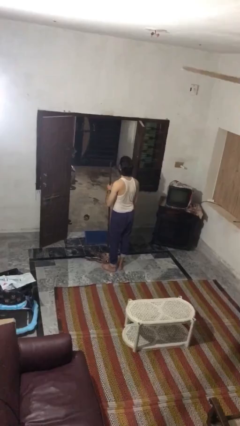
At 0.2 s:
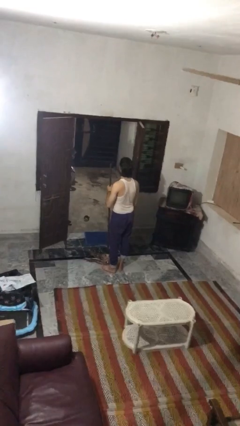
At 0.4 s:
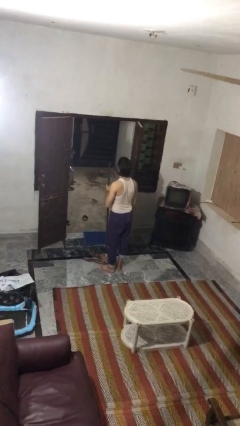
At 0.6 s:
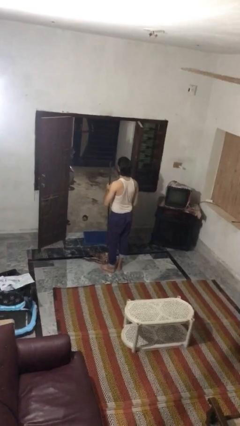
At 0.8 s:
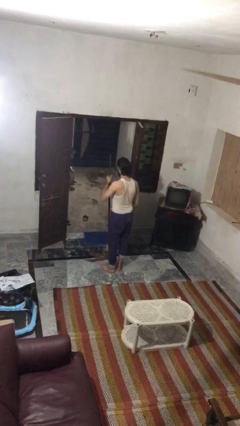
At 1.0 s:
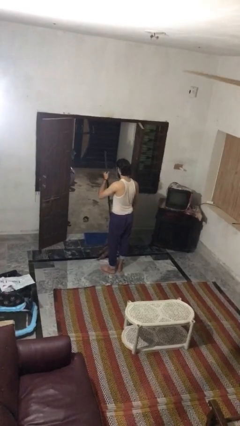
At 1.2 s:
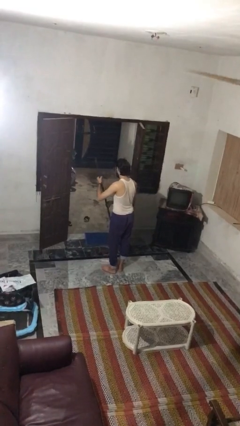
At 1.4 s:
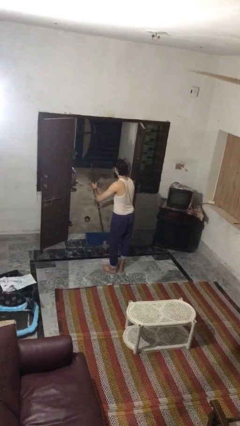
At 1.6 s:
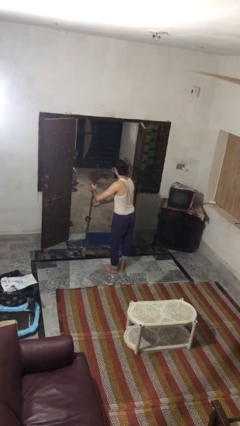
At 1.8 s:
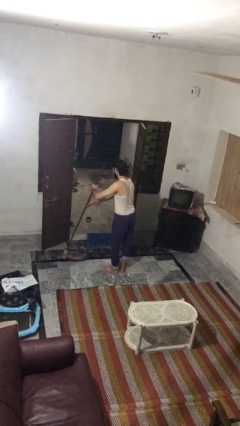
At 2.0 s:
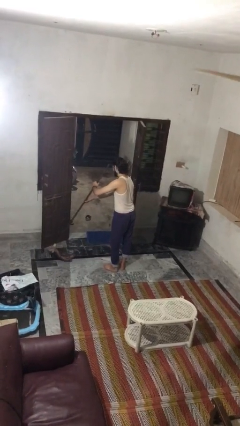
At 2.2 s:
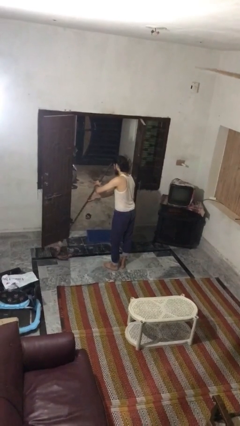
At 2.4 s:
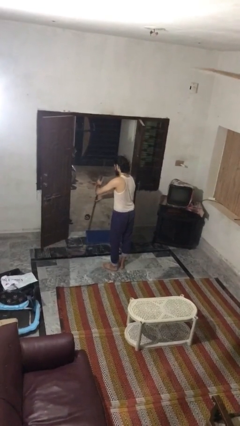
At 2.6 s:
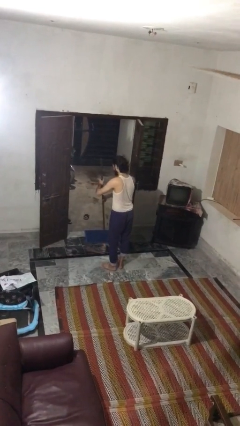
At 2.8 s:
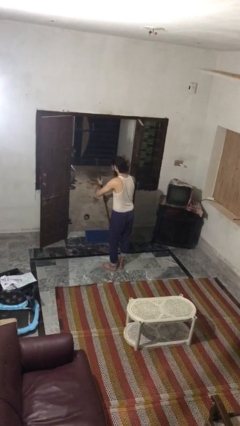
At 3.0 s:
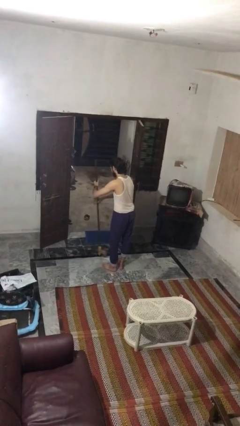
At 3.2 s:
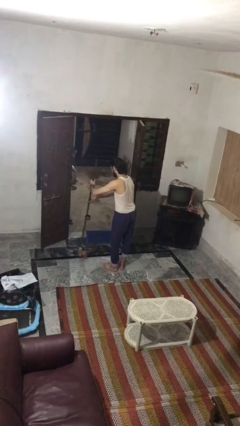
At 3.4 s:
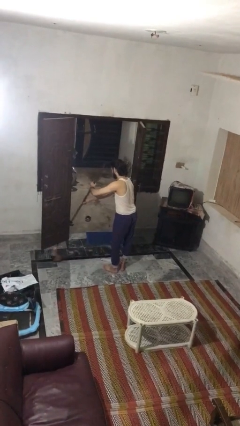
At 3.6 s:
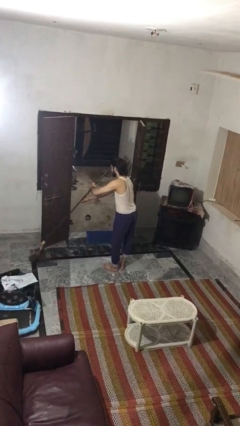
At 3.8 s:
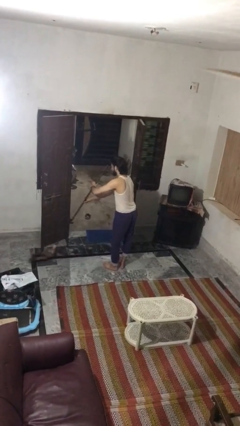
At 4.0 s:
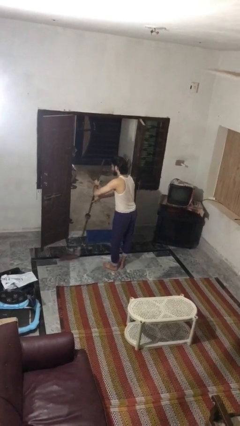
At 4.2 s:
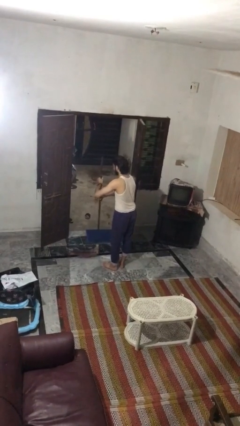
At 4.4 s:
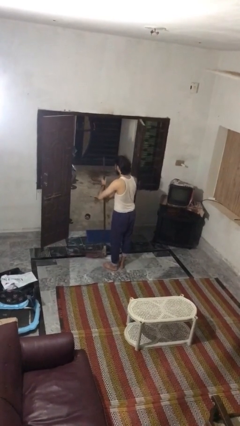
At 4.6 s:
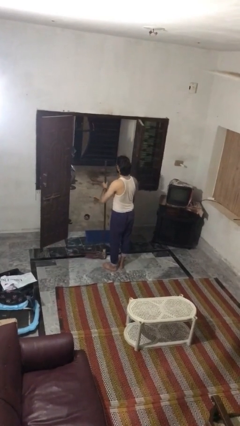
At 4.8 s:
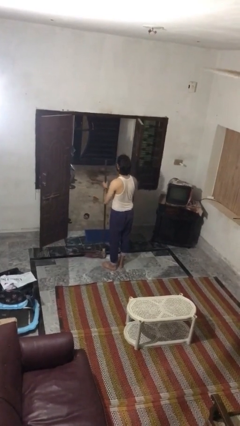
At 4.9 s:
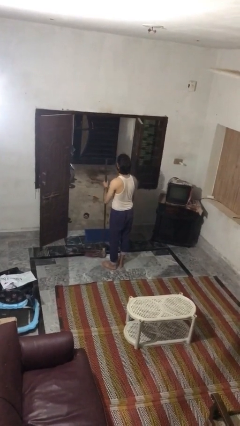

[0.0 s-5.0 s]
person mops

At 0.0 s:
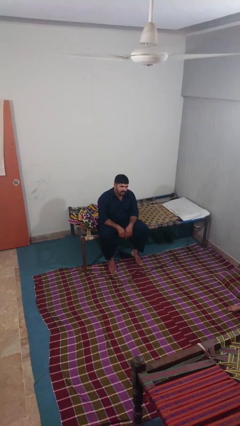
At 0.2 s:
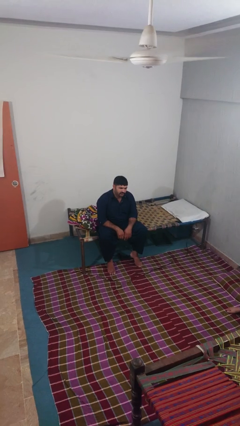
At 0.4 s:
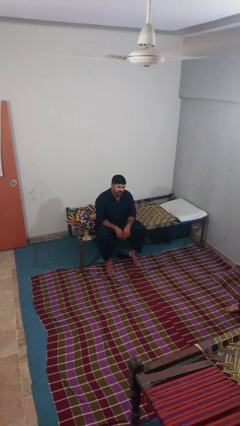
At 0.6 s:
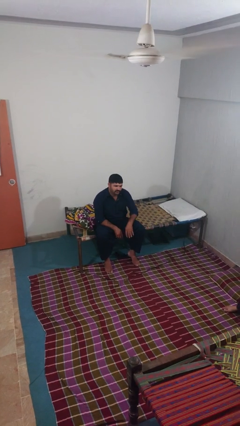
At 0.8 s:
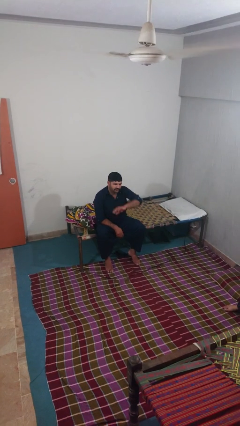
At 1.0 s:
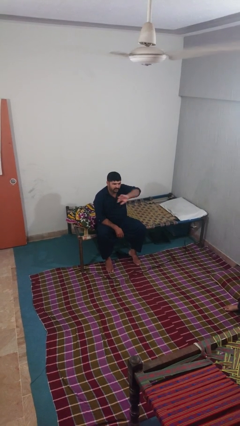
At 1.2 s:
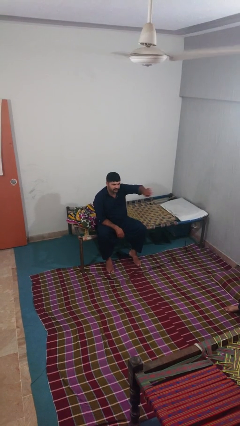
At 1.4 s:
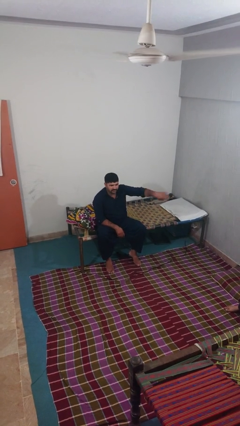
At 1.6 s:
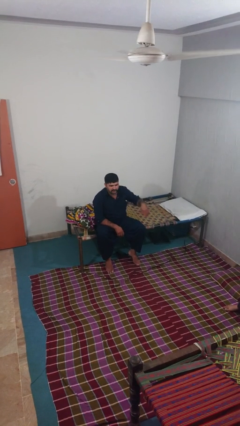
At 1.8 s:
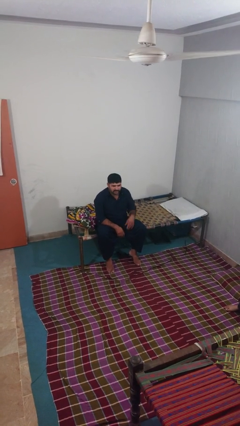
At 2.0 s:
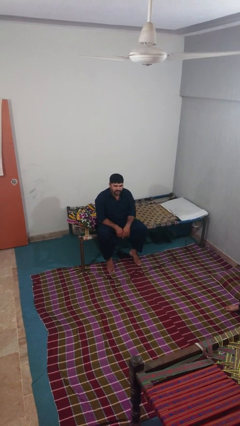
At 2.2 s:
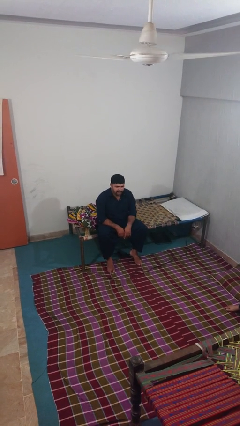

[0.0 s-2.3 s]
person gestures swipe left

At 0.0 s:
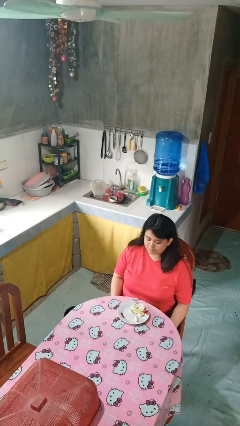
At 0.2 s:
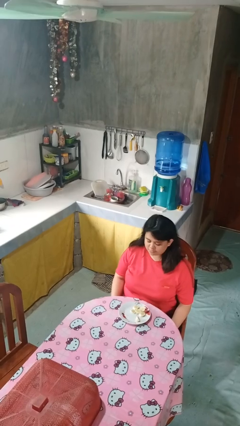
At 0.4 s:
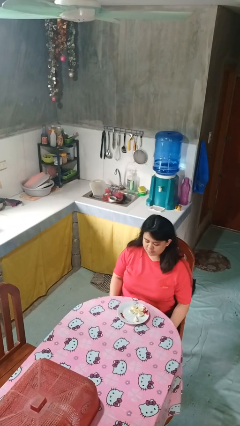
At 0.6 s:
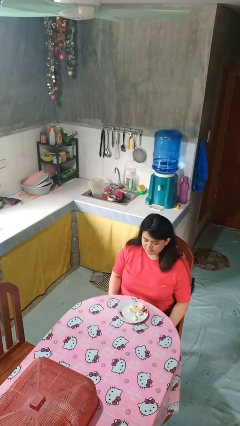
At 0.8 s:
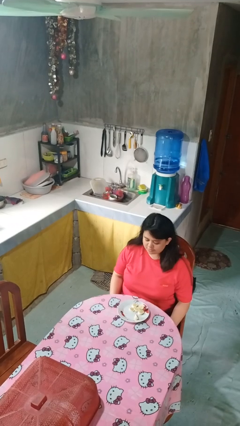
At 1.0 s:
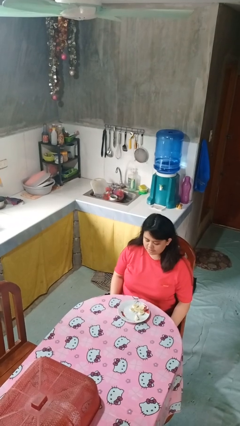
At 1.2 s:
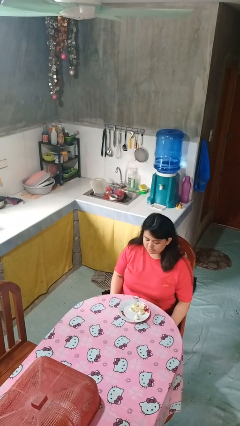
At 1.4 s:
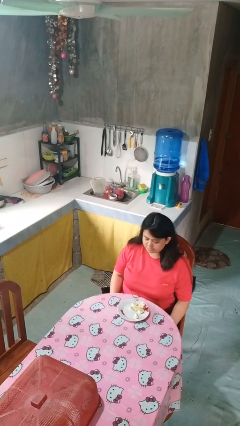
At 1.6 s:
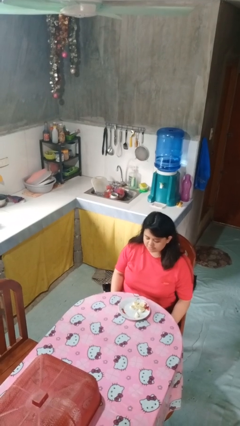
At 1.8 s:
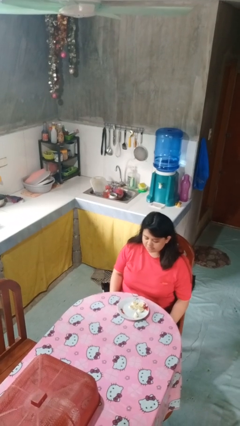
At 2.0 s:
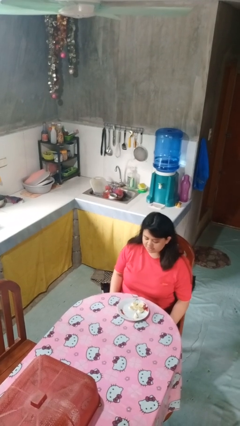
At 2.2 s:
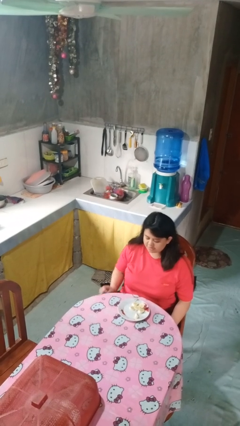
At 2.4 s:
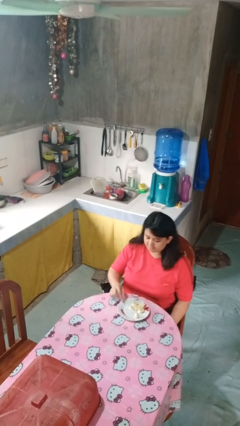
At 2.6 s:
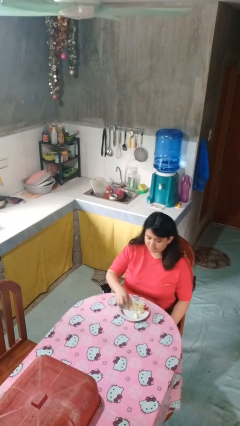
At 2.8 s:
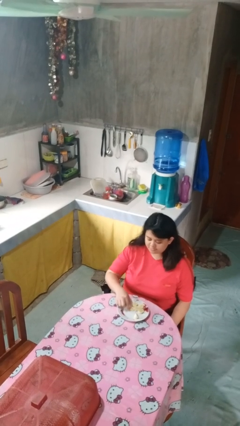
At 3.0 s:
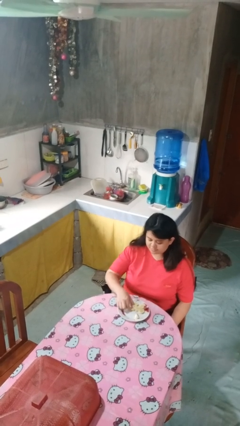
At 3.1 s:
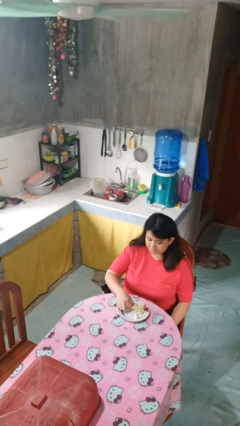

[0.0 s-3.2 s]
person eats with hands

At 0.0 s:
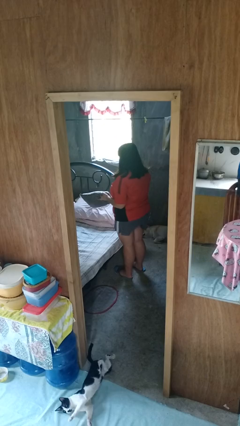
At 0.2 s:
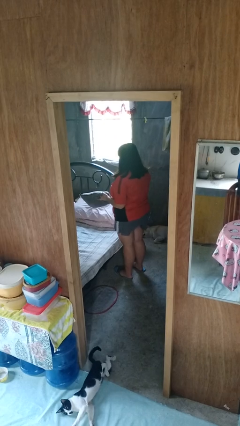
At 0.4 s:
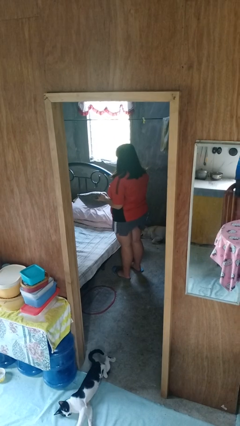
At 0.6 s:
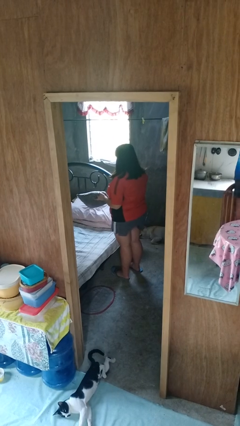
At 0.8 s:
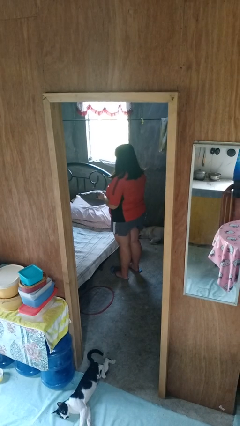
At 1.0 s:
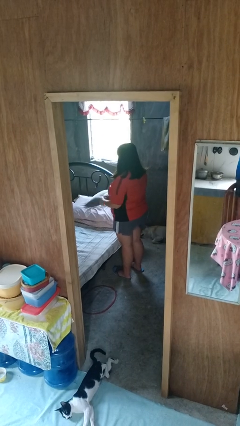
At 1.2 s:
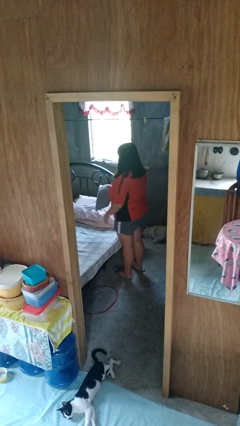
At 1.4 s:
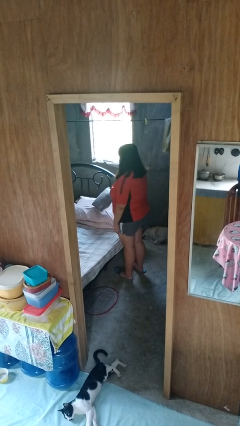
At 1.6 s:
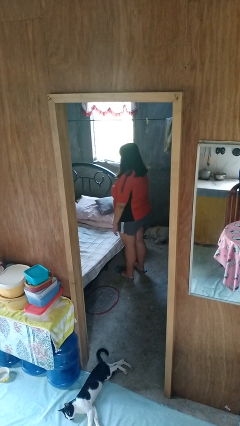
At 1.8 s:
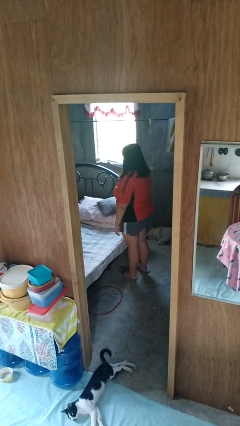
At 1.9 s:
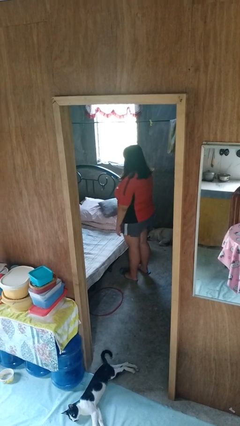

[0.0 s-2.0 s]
person puts down object on bed

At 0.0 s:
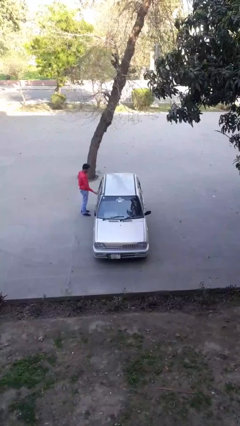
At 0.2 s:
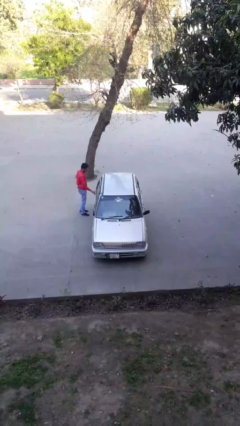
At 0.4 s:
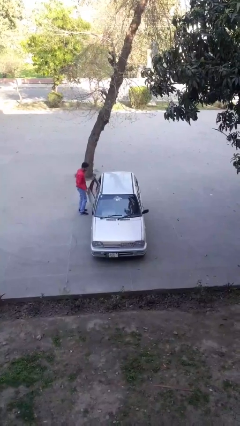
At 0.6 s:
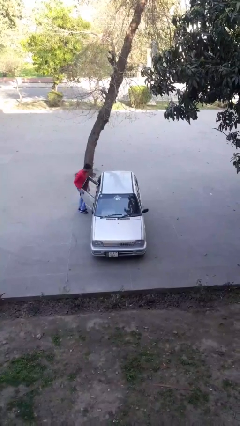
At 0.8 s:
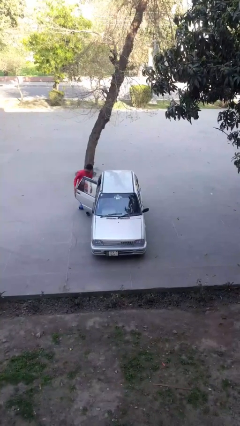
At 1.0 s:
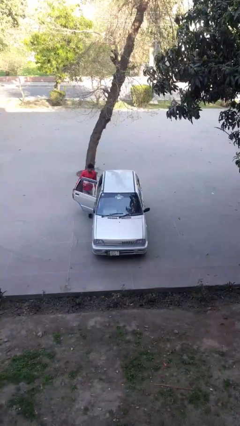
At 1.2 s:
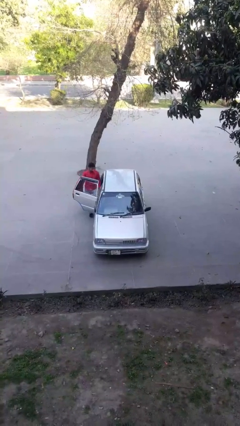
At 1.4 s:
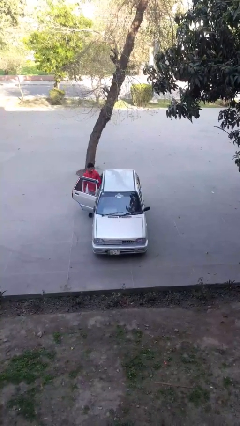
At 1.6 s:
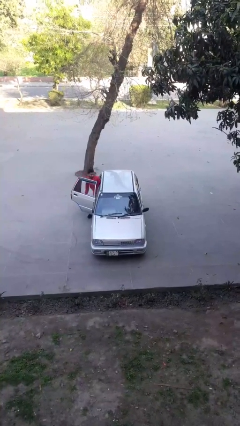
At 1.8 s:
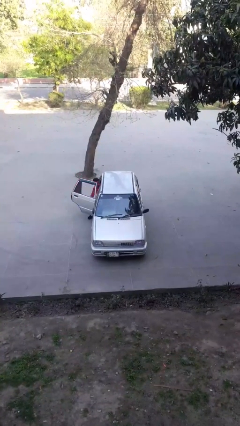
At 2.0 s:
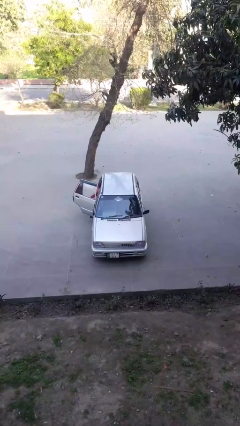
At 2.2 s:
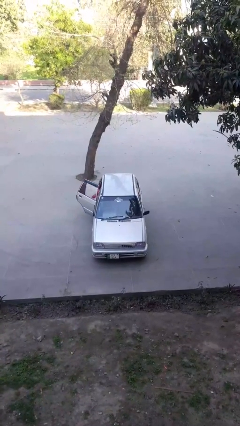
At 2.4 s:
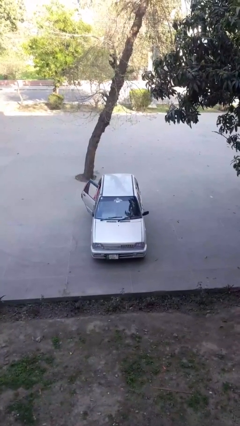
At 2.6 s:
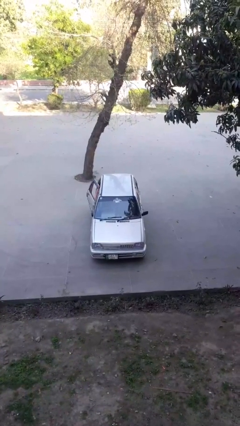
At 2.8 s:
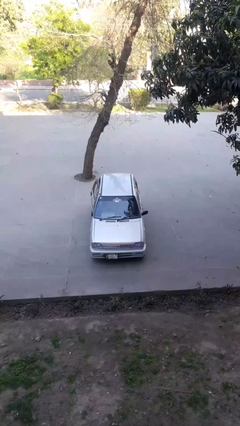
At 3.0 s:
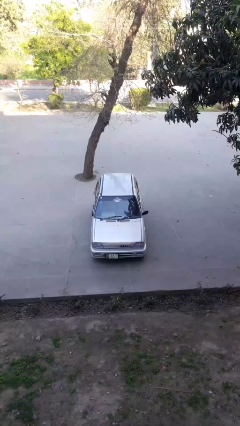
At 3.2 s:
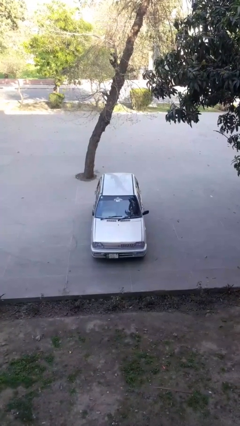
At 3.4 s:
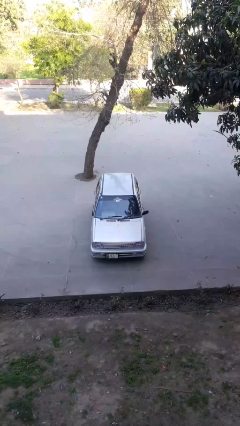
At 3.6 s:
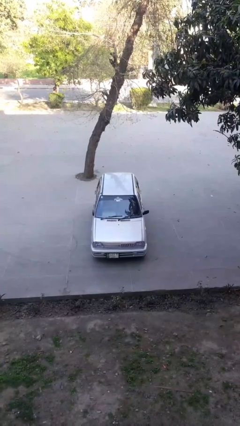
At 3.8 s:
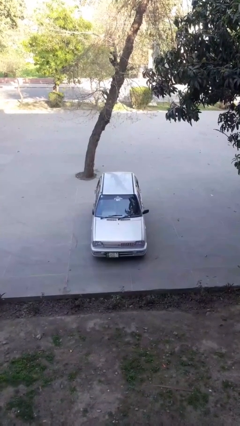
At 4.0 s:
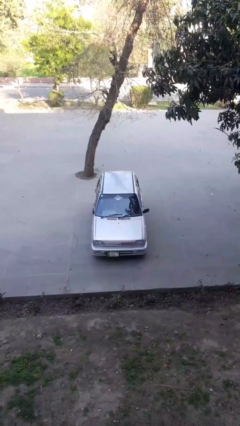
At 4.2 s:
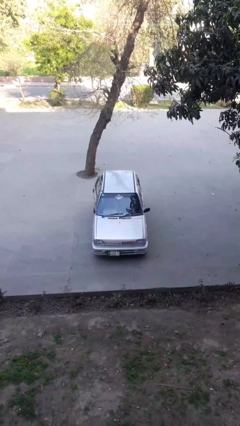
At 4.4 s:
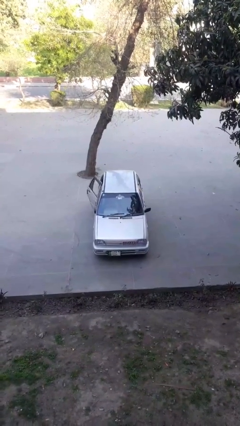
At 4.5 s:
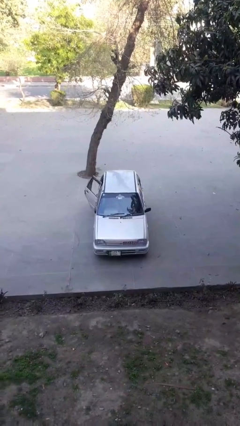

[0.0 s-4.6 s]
car picks up person

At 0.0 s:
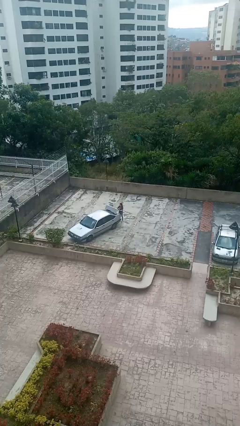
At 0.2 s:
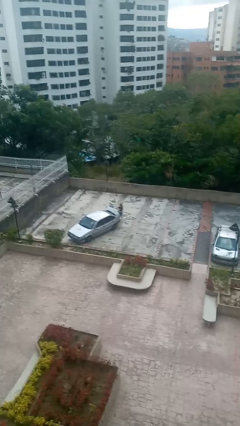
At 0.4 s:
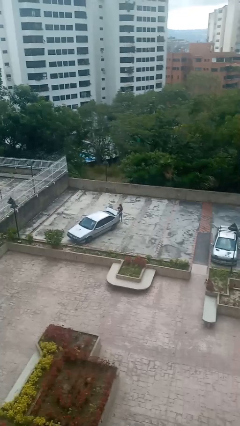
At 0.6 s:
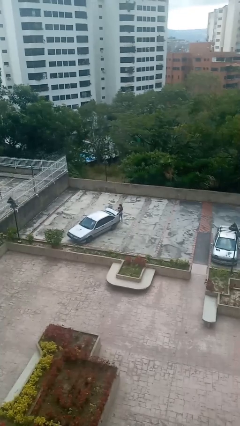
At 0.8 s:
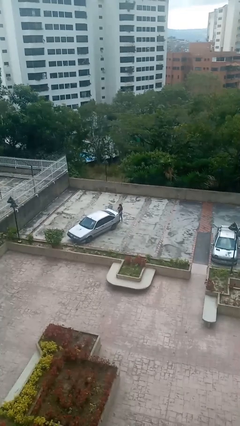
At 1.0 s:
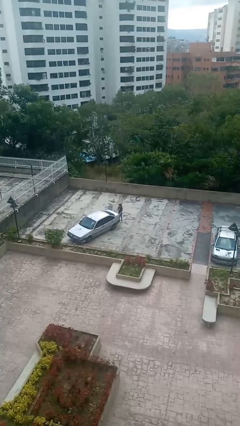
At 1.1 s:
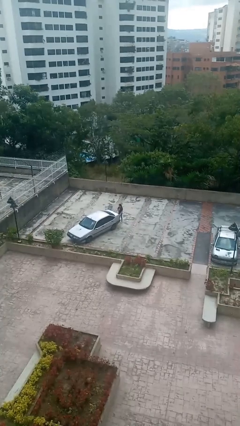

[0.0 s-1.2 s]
person closes car trunk
